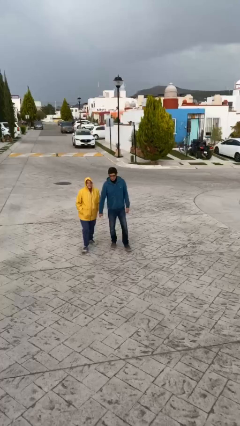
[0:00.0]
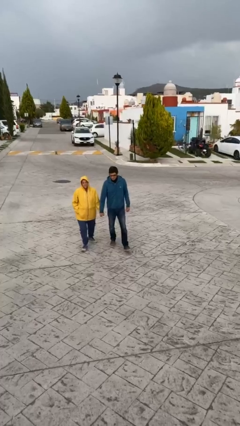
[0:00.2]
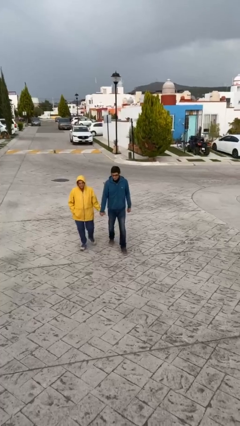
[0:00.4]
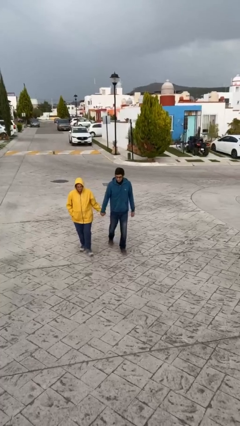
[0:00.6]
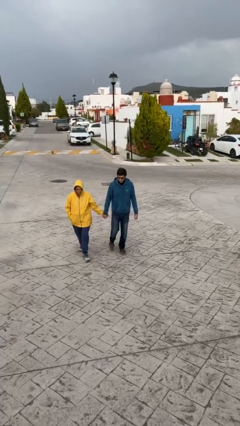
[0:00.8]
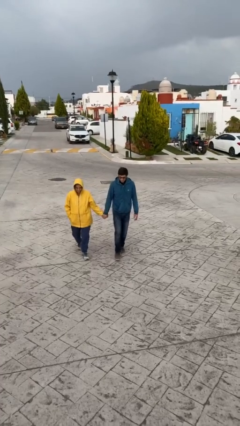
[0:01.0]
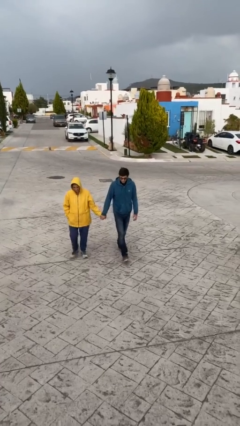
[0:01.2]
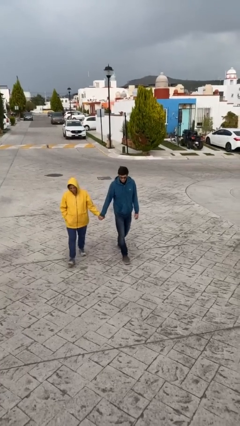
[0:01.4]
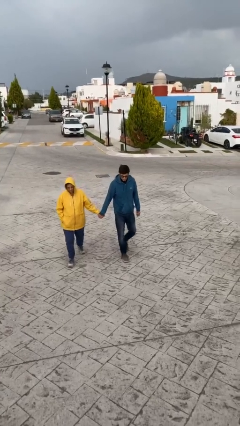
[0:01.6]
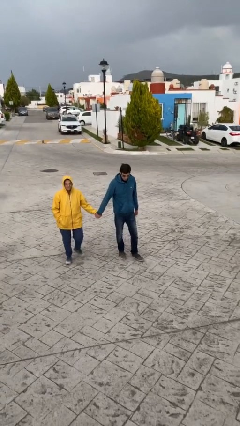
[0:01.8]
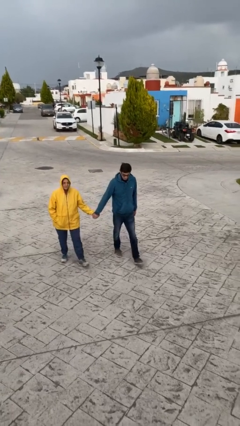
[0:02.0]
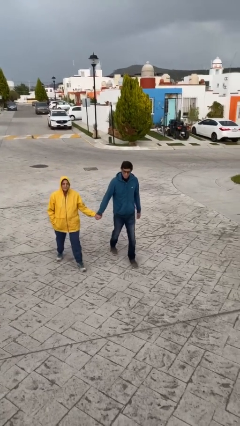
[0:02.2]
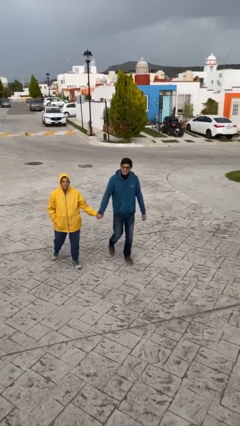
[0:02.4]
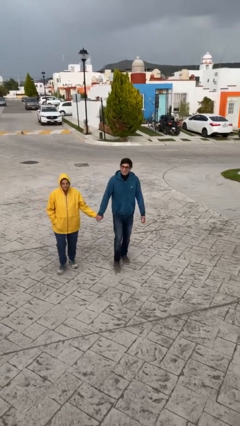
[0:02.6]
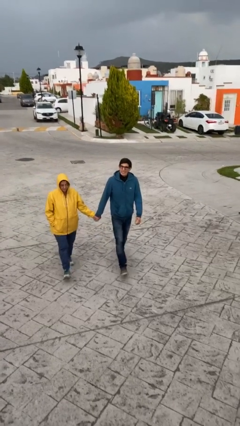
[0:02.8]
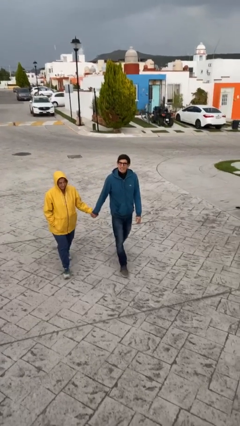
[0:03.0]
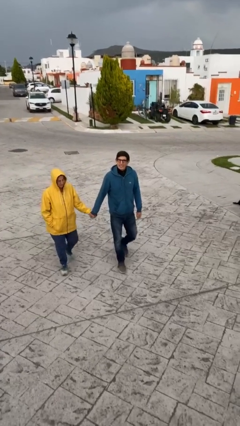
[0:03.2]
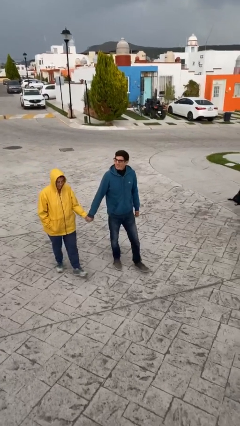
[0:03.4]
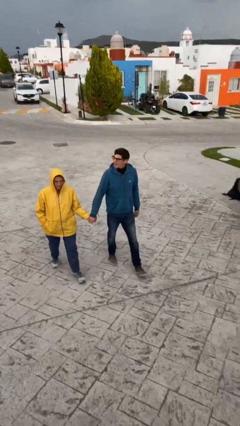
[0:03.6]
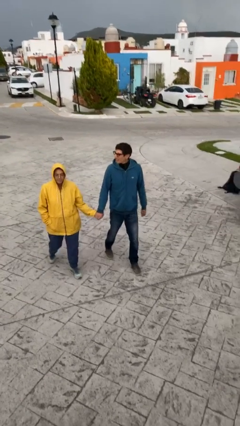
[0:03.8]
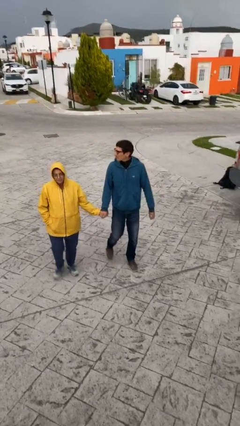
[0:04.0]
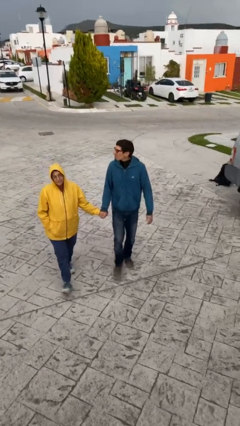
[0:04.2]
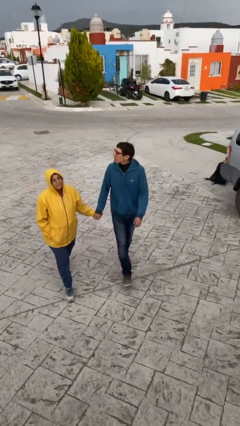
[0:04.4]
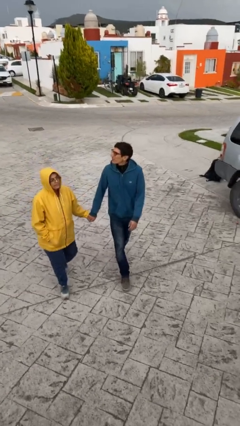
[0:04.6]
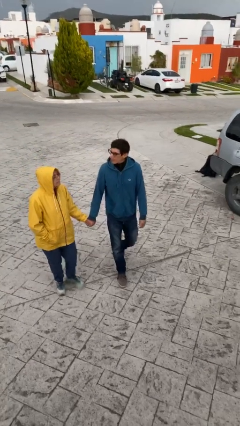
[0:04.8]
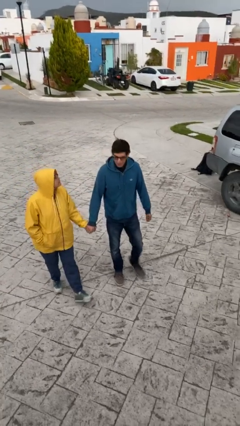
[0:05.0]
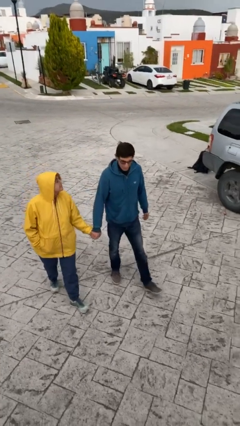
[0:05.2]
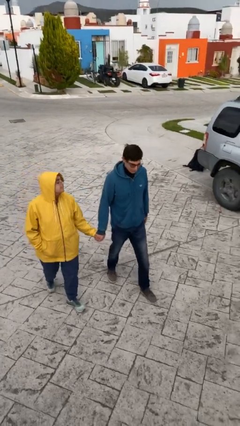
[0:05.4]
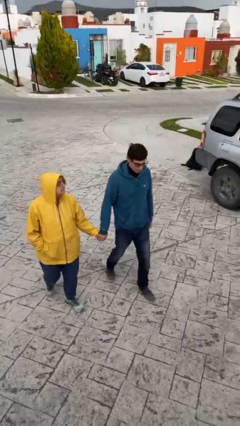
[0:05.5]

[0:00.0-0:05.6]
person holds hand

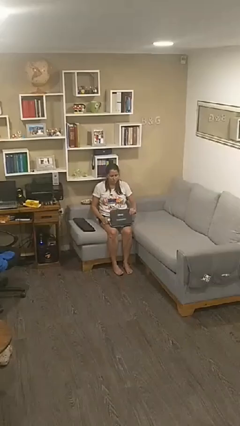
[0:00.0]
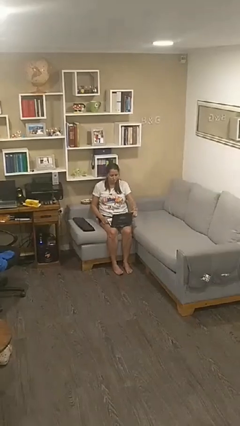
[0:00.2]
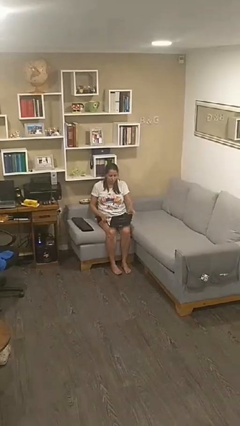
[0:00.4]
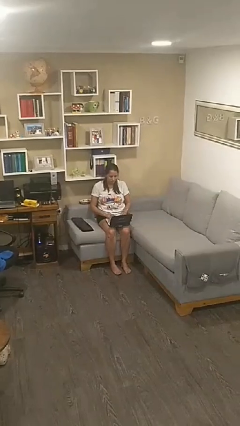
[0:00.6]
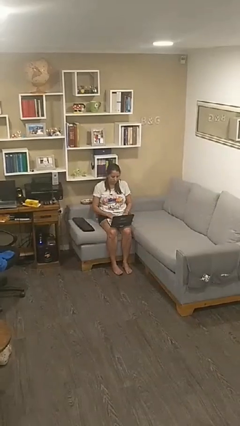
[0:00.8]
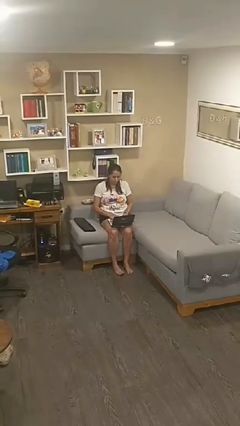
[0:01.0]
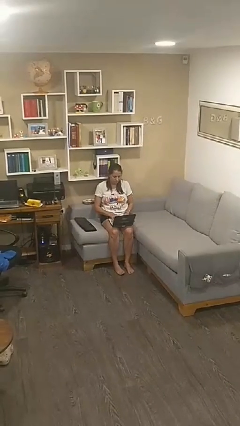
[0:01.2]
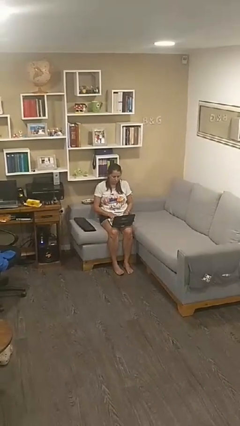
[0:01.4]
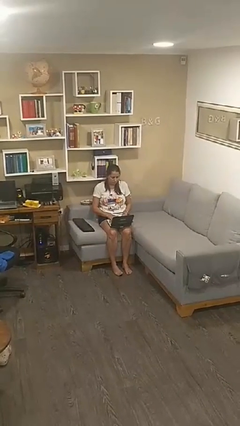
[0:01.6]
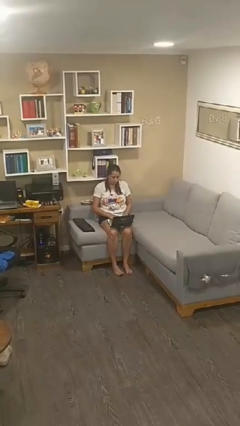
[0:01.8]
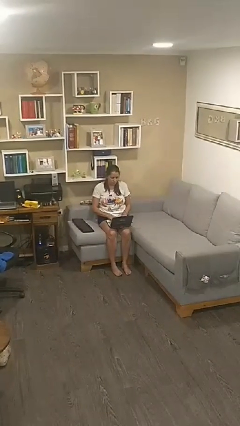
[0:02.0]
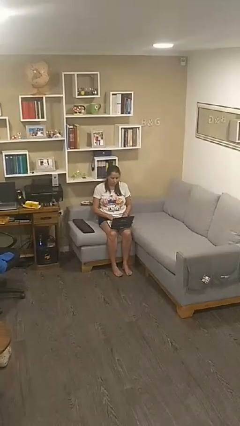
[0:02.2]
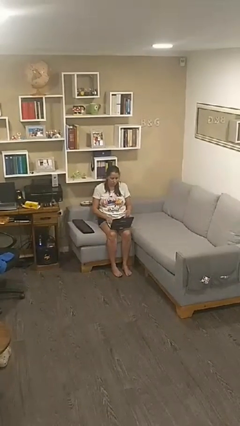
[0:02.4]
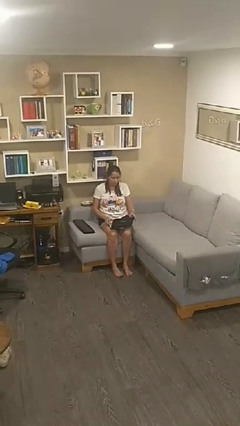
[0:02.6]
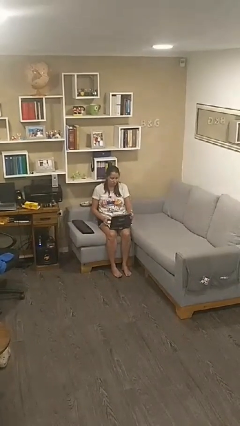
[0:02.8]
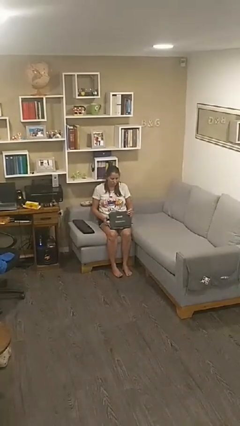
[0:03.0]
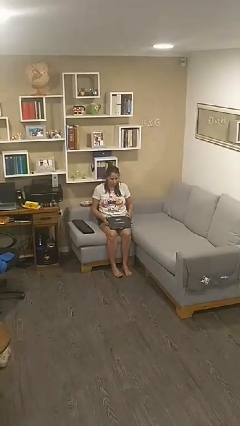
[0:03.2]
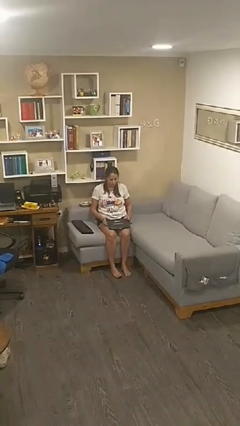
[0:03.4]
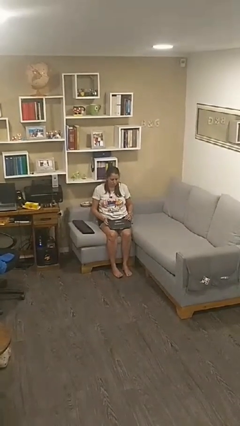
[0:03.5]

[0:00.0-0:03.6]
person interacts with laptop

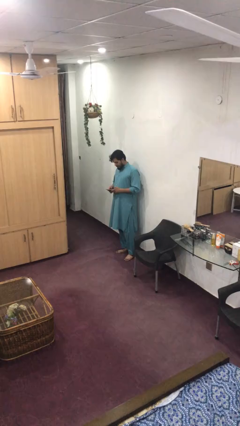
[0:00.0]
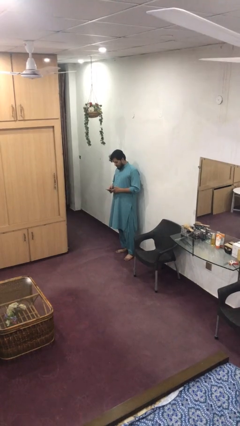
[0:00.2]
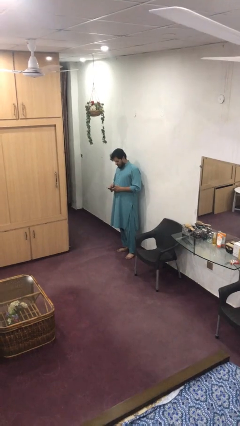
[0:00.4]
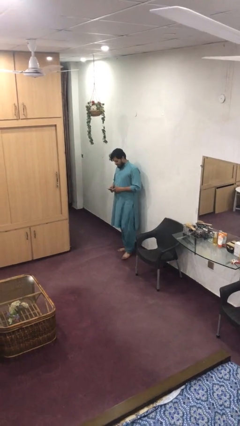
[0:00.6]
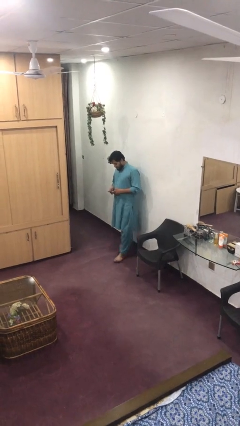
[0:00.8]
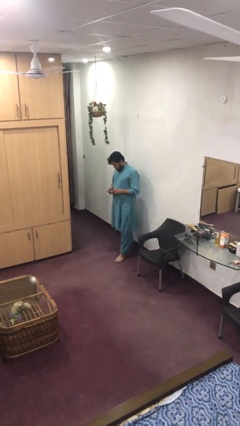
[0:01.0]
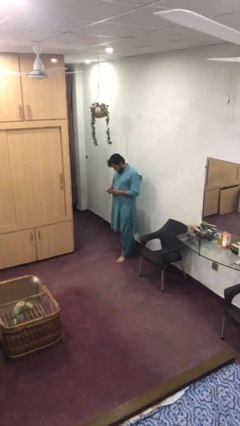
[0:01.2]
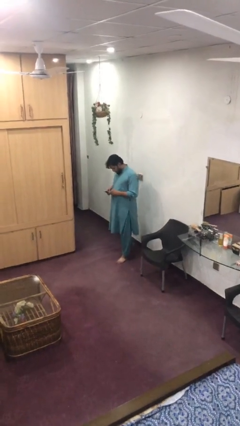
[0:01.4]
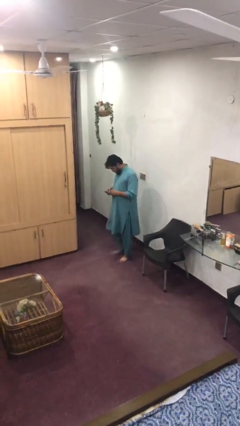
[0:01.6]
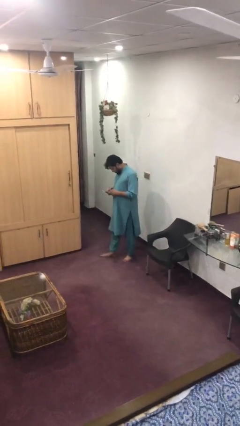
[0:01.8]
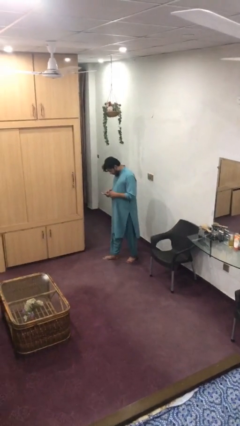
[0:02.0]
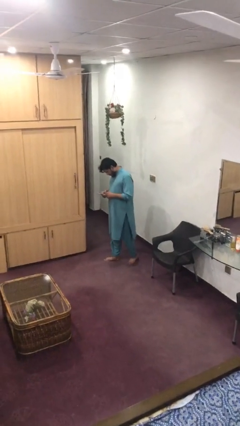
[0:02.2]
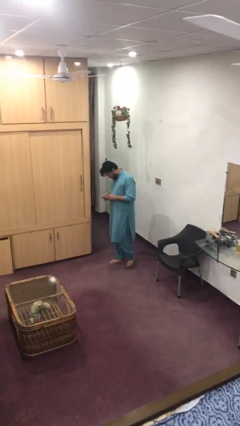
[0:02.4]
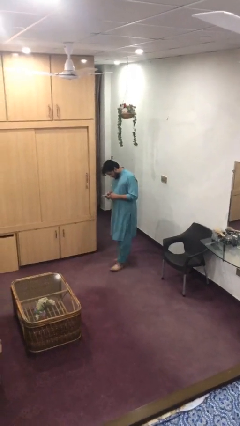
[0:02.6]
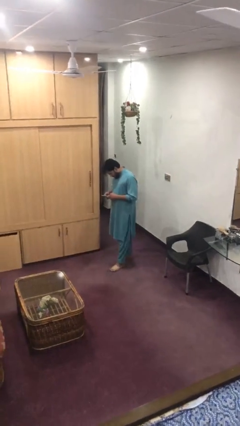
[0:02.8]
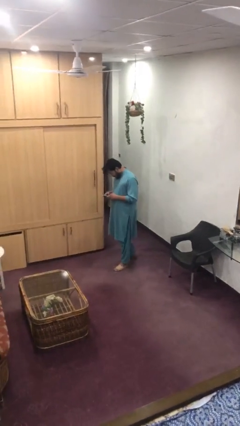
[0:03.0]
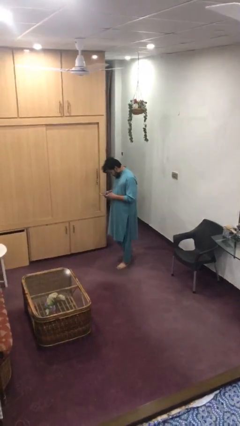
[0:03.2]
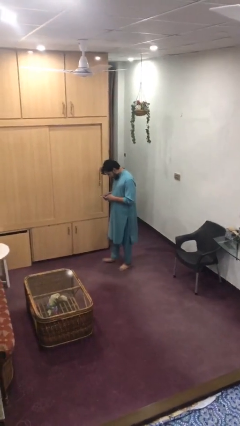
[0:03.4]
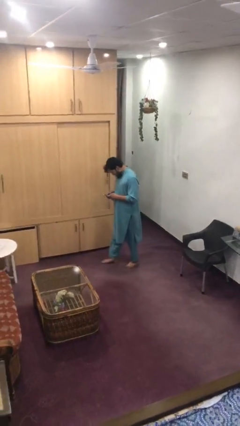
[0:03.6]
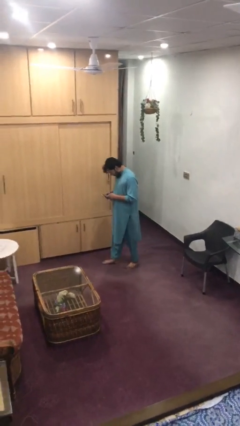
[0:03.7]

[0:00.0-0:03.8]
person texts on phone

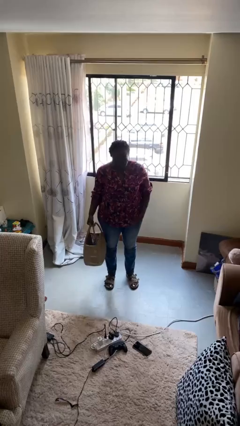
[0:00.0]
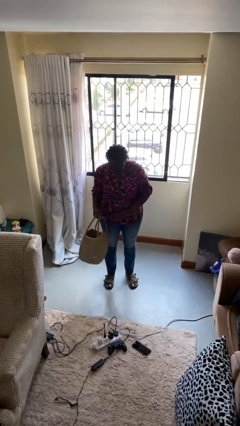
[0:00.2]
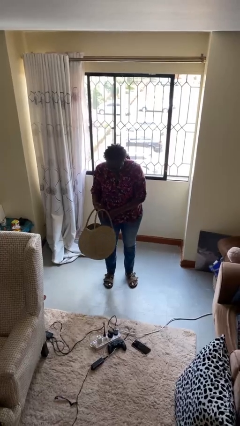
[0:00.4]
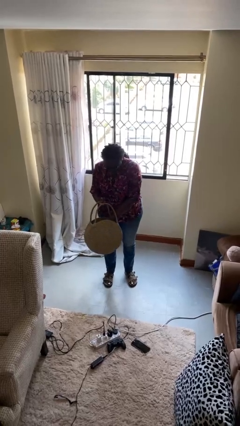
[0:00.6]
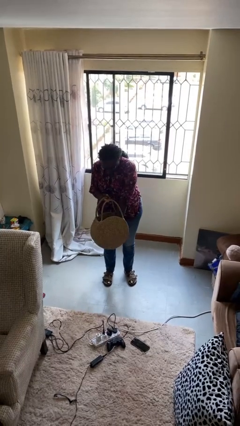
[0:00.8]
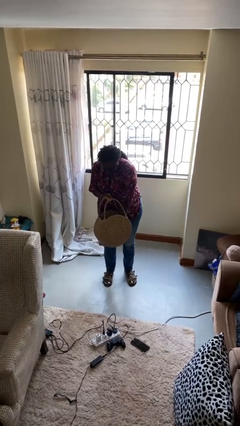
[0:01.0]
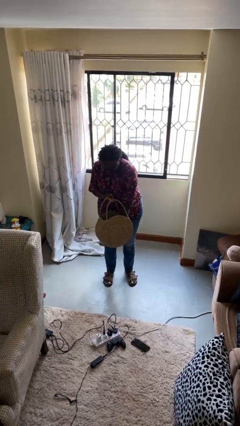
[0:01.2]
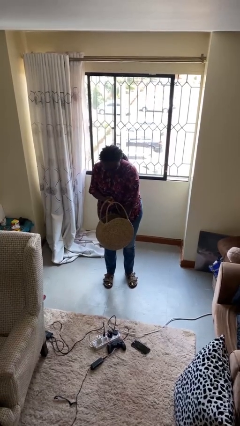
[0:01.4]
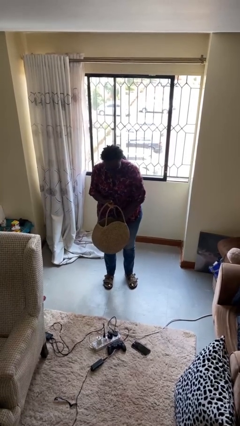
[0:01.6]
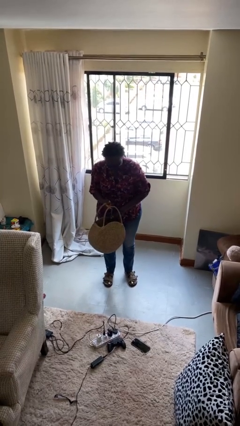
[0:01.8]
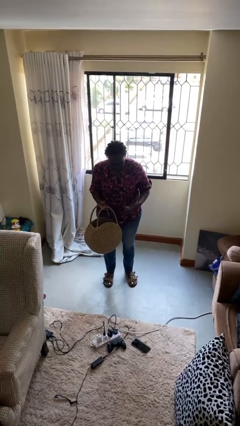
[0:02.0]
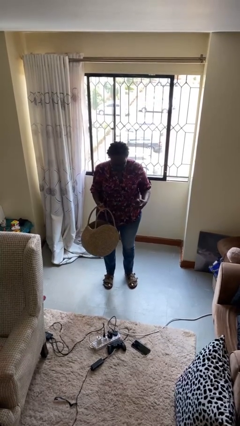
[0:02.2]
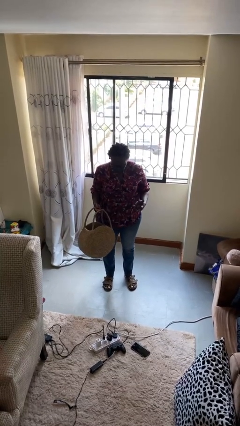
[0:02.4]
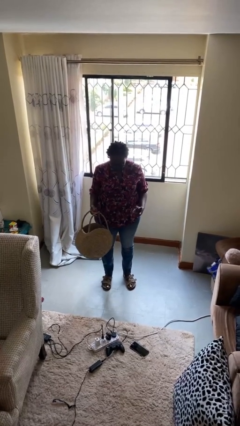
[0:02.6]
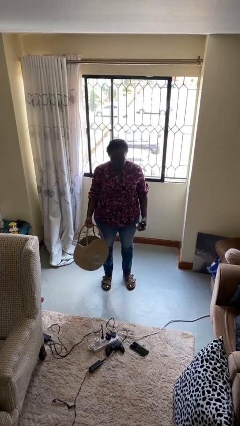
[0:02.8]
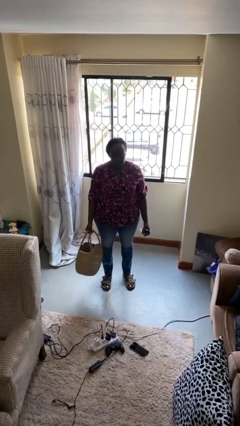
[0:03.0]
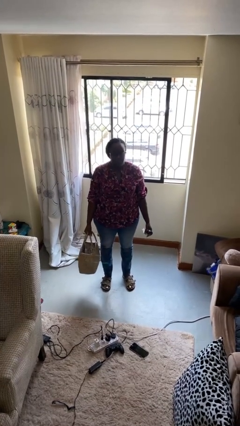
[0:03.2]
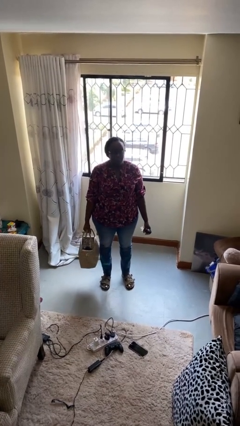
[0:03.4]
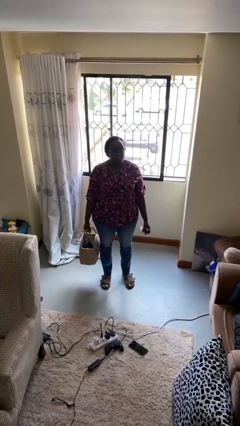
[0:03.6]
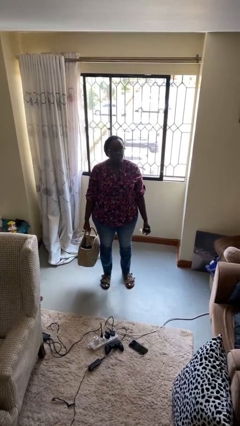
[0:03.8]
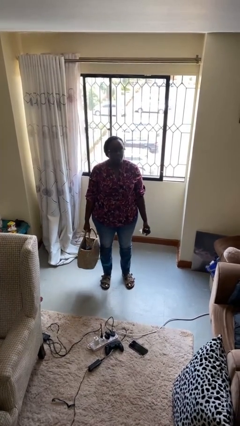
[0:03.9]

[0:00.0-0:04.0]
person takes object from basket

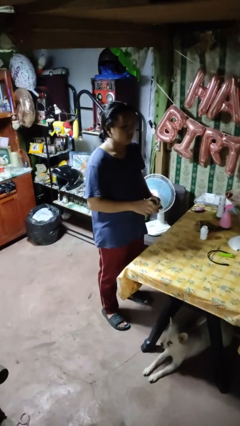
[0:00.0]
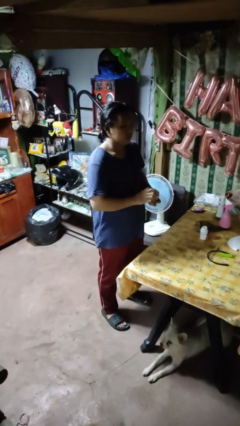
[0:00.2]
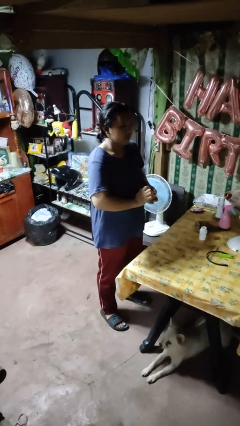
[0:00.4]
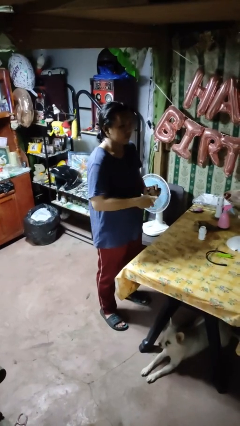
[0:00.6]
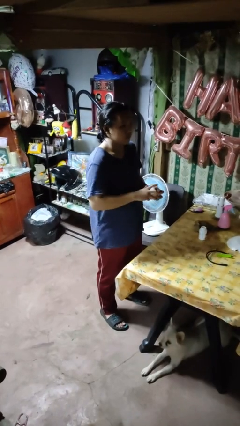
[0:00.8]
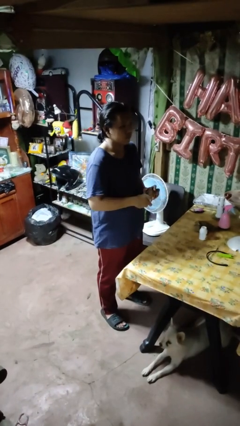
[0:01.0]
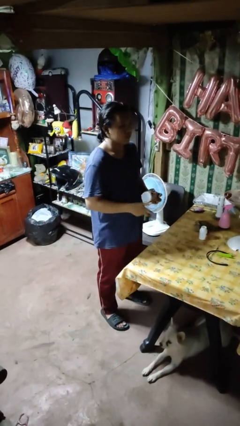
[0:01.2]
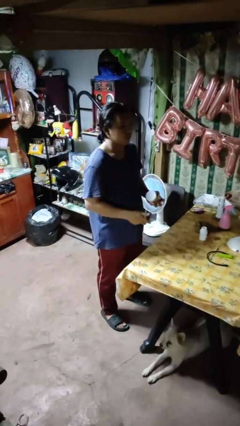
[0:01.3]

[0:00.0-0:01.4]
person closes jar
